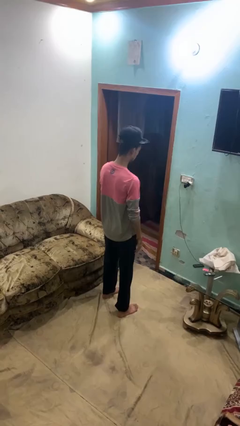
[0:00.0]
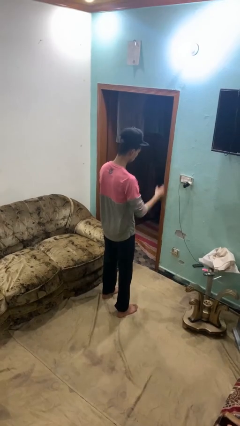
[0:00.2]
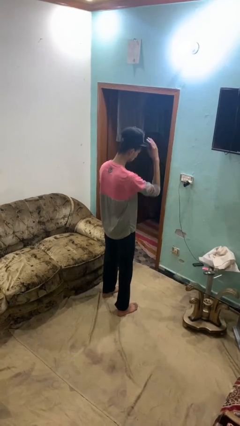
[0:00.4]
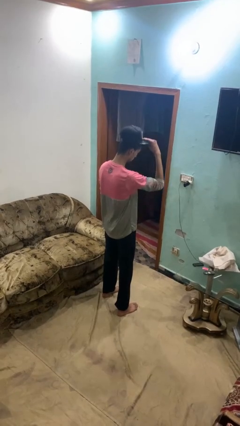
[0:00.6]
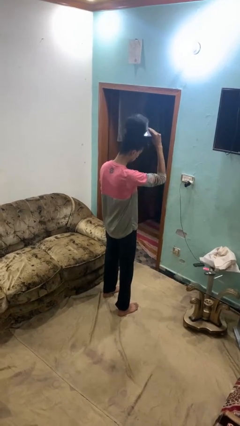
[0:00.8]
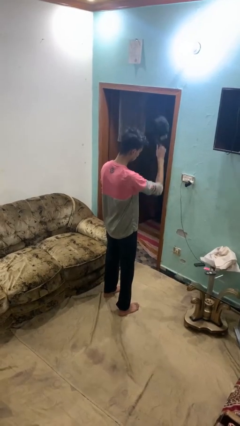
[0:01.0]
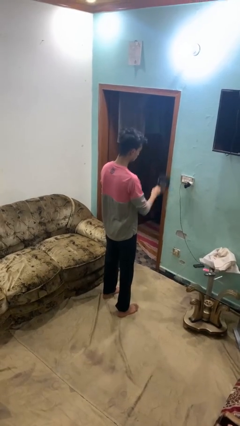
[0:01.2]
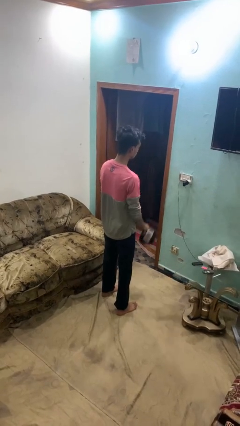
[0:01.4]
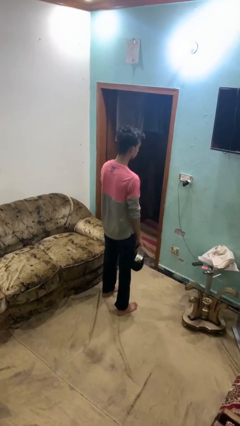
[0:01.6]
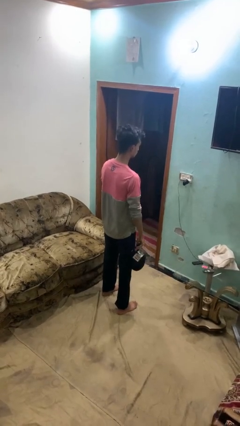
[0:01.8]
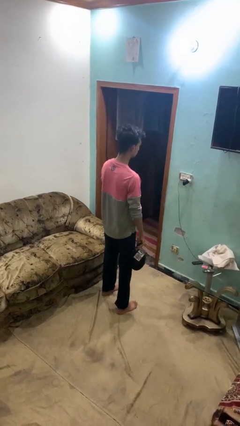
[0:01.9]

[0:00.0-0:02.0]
person takes off hat

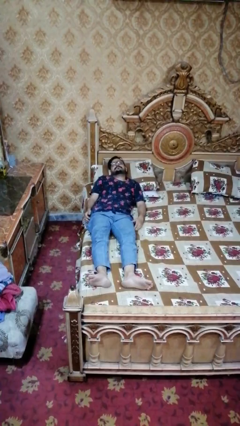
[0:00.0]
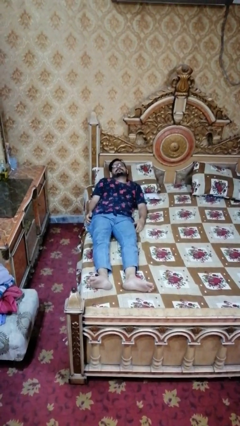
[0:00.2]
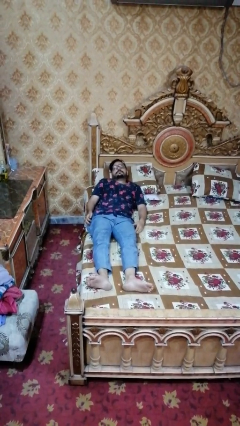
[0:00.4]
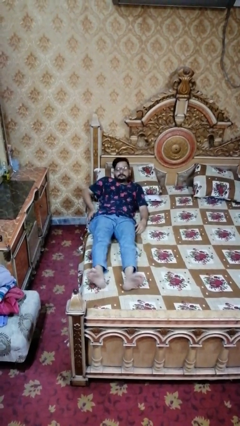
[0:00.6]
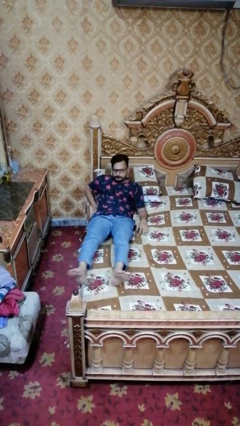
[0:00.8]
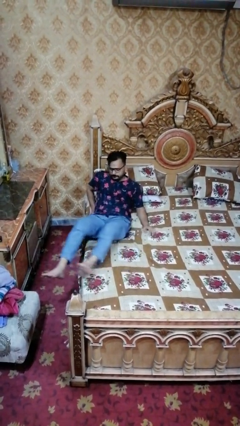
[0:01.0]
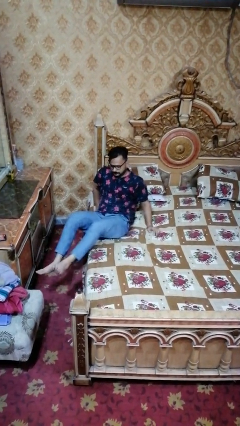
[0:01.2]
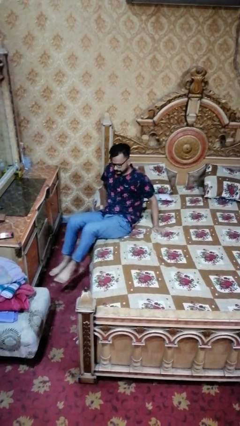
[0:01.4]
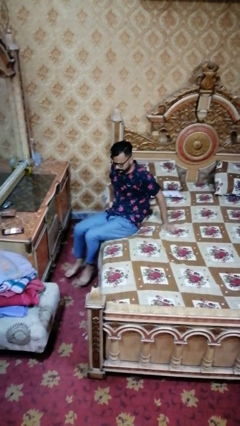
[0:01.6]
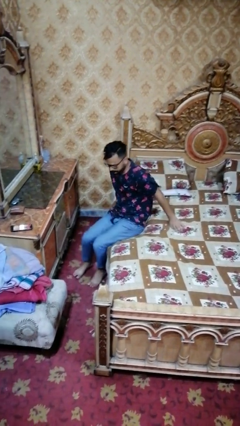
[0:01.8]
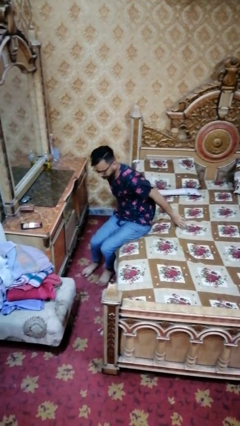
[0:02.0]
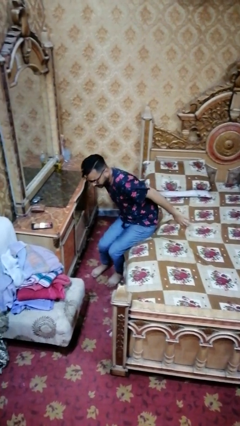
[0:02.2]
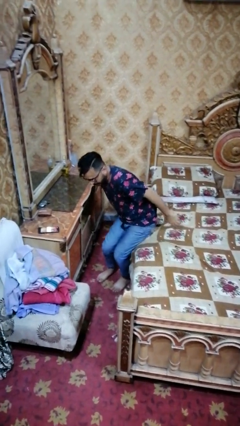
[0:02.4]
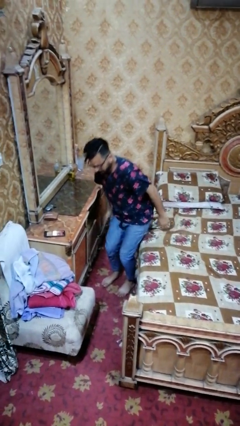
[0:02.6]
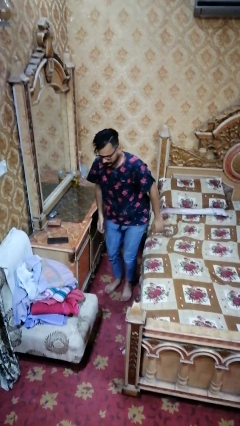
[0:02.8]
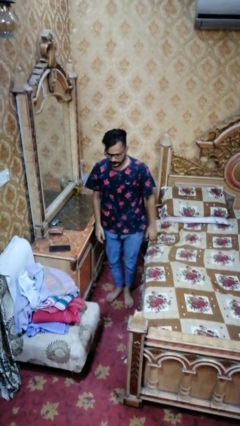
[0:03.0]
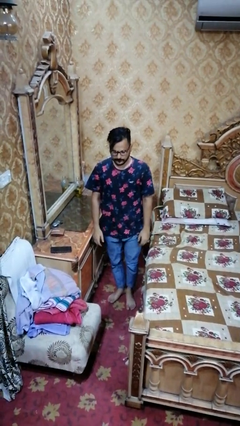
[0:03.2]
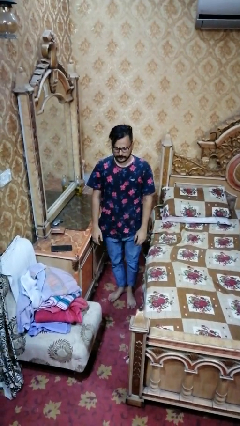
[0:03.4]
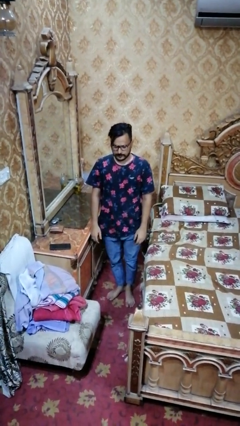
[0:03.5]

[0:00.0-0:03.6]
person stands up

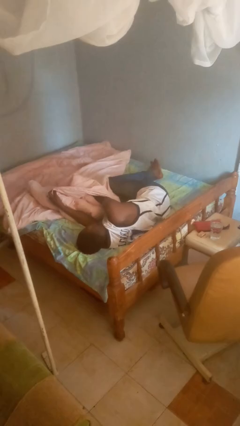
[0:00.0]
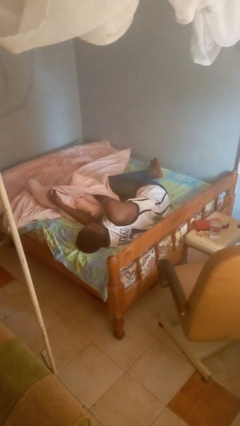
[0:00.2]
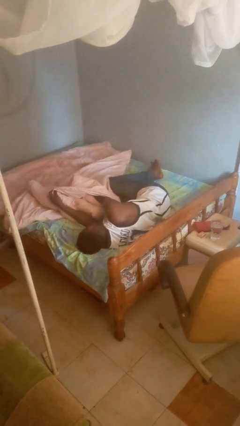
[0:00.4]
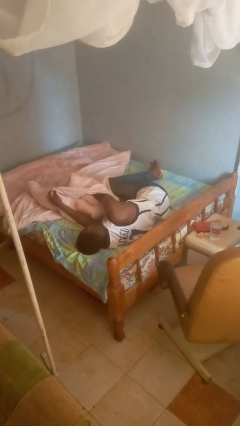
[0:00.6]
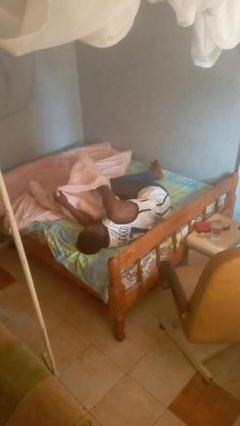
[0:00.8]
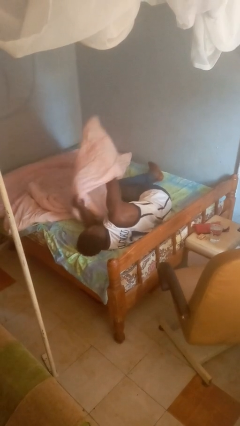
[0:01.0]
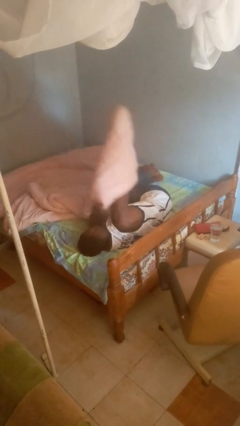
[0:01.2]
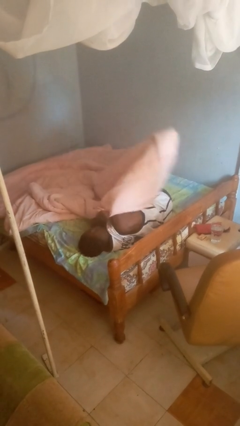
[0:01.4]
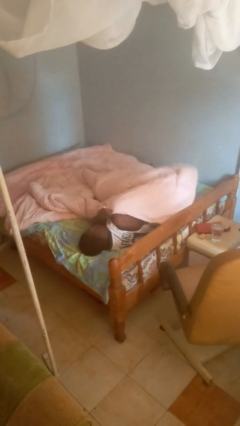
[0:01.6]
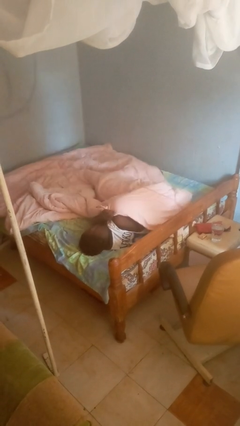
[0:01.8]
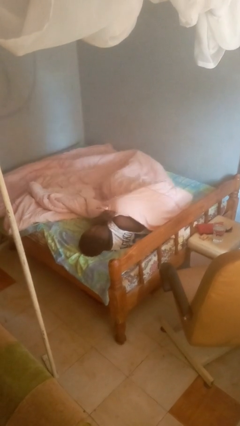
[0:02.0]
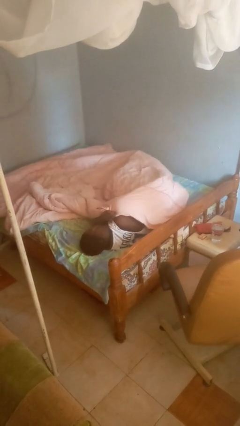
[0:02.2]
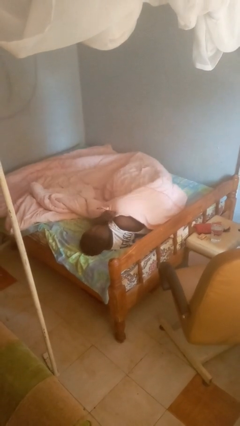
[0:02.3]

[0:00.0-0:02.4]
person covers with blanket

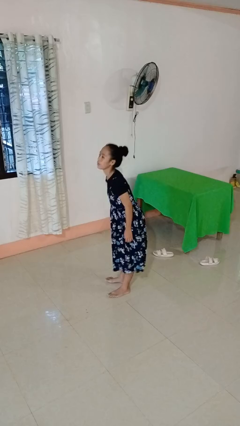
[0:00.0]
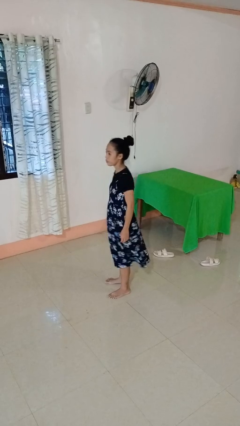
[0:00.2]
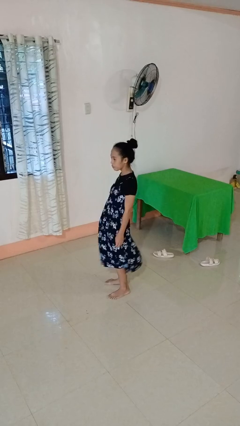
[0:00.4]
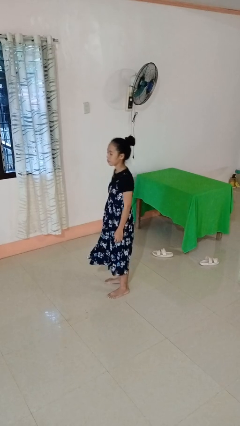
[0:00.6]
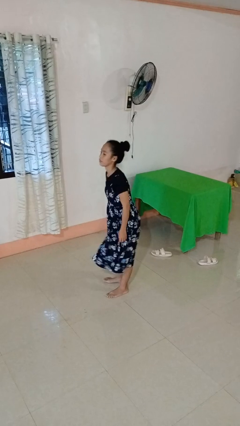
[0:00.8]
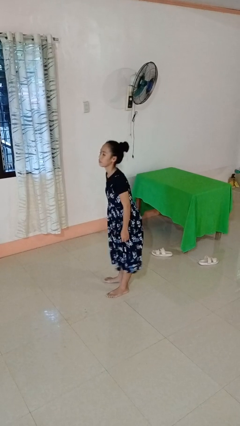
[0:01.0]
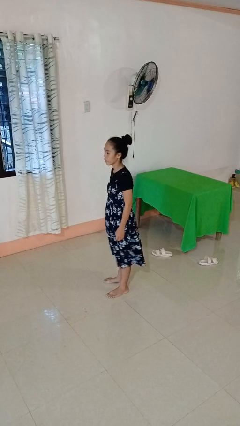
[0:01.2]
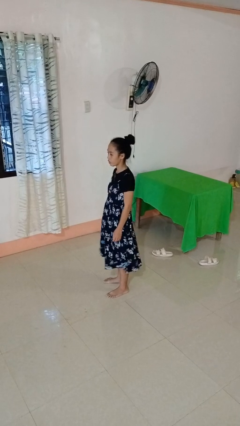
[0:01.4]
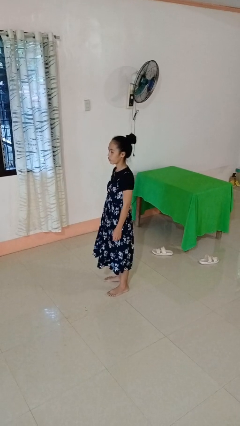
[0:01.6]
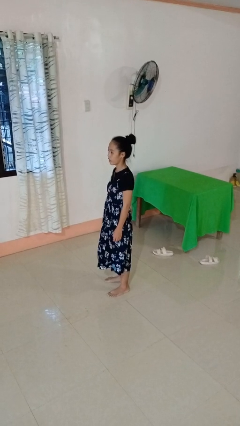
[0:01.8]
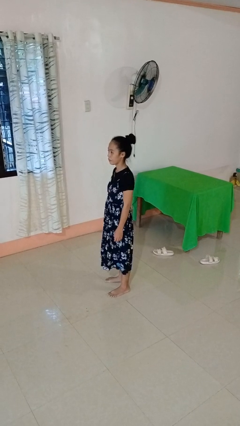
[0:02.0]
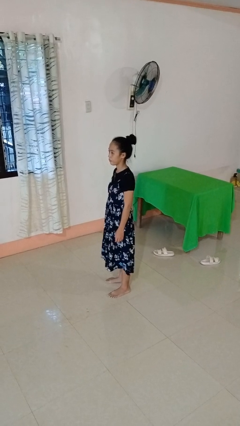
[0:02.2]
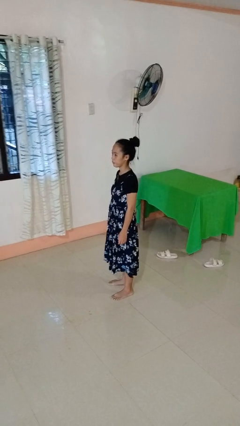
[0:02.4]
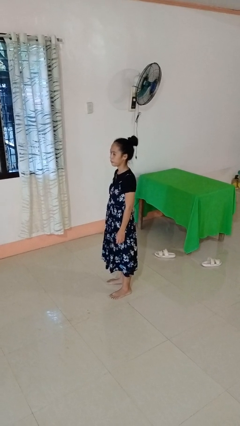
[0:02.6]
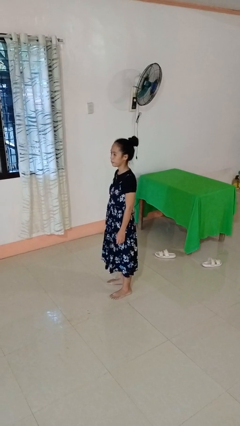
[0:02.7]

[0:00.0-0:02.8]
person wiggles hips

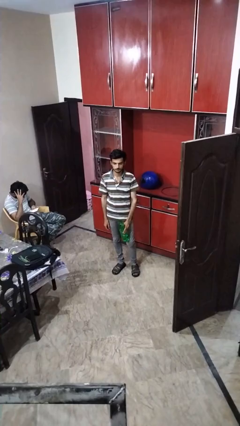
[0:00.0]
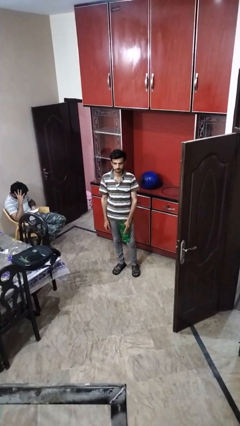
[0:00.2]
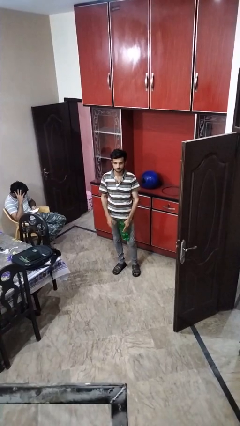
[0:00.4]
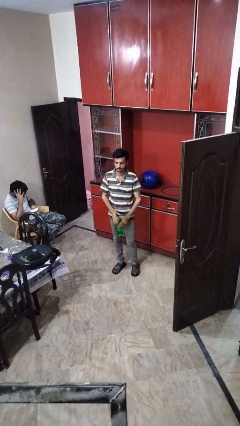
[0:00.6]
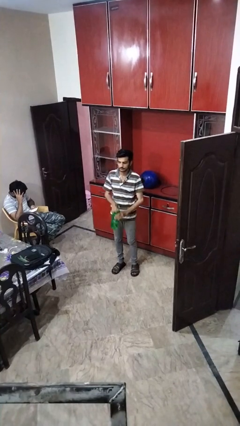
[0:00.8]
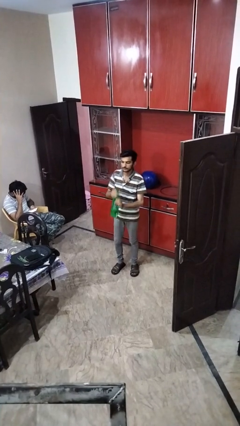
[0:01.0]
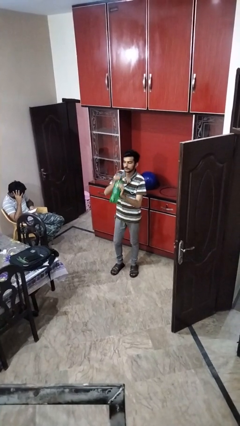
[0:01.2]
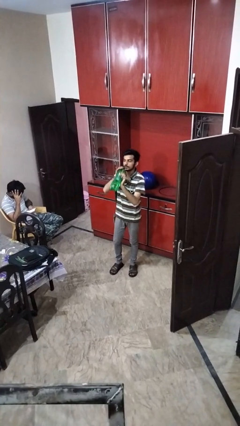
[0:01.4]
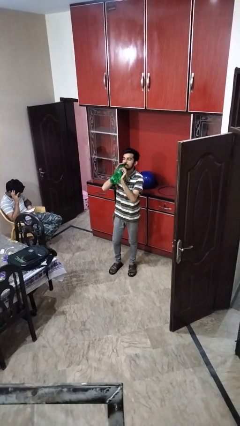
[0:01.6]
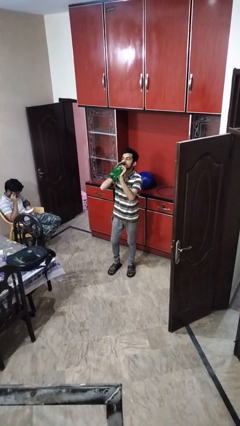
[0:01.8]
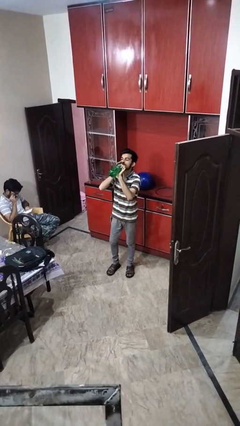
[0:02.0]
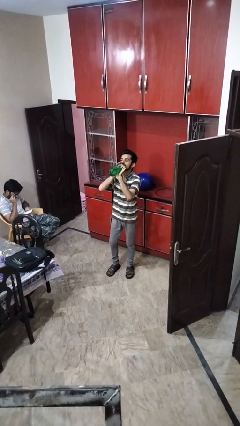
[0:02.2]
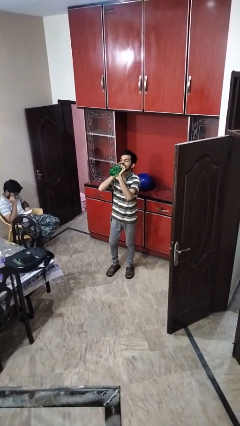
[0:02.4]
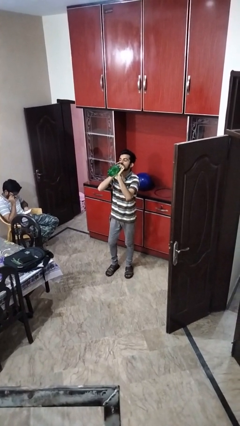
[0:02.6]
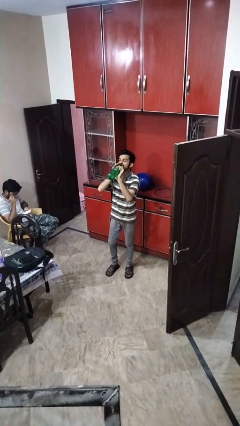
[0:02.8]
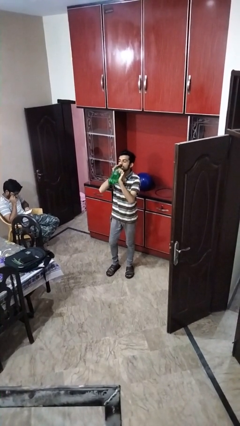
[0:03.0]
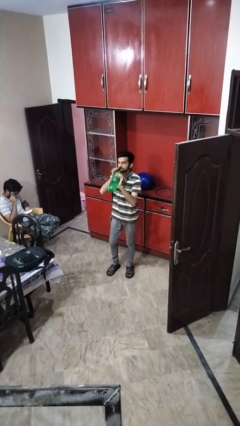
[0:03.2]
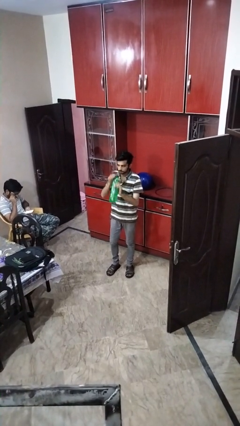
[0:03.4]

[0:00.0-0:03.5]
person drinks from bottle

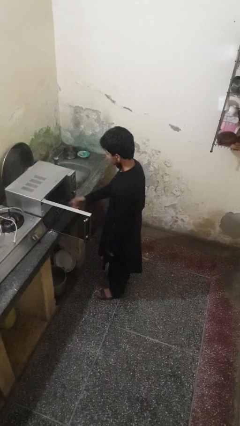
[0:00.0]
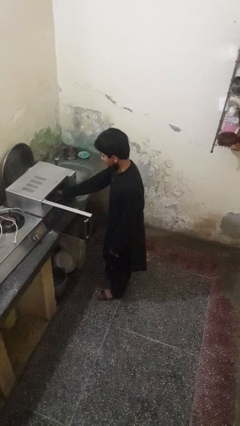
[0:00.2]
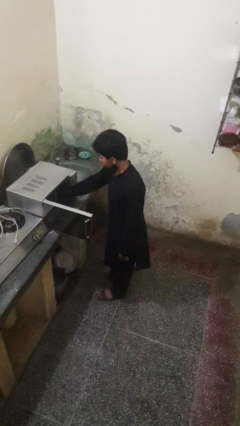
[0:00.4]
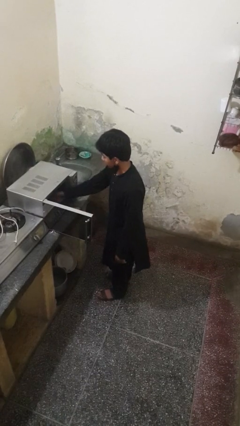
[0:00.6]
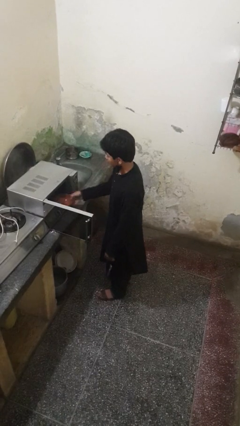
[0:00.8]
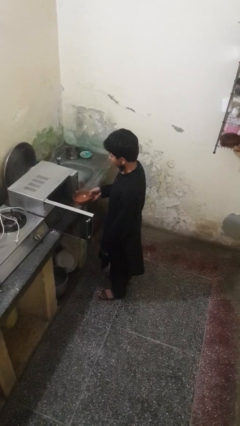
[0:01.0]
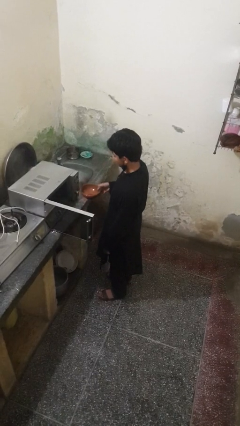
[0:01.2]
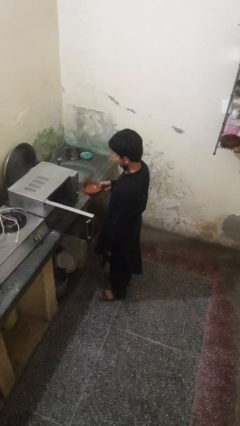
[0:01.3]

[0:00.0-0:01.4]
person takes object from microwave

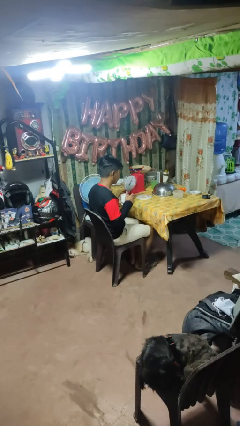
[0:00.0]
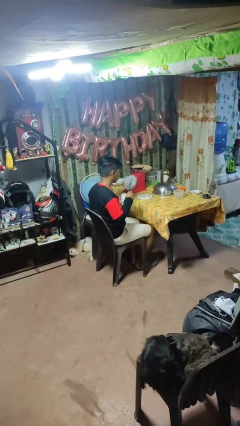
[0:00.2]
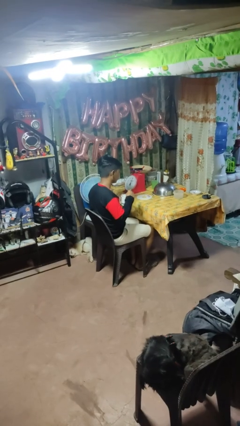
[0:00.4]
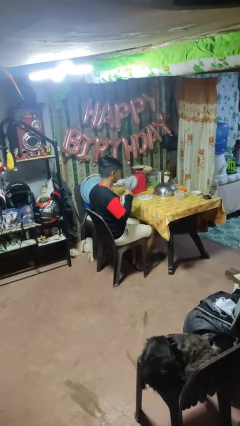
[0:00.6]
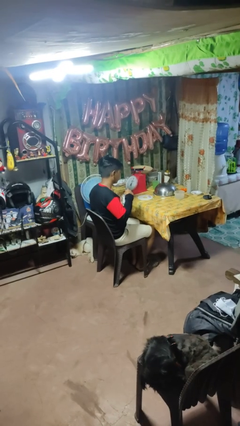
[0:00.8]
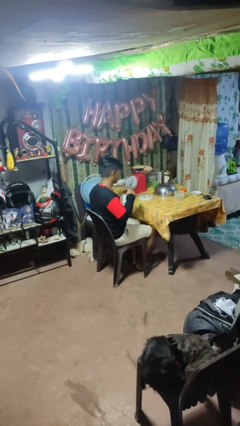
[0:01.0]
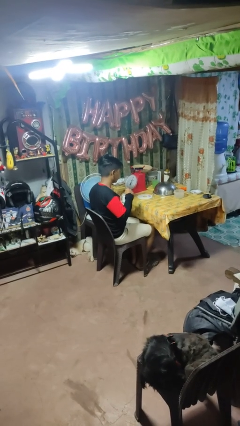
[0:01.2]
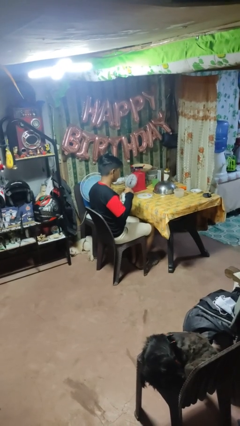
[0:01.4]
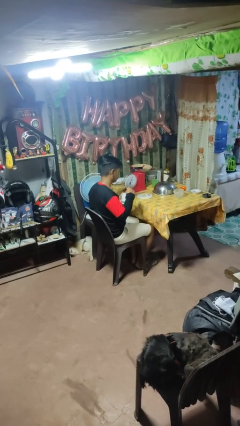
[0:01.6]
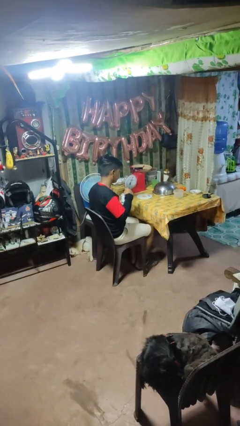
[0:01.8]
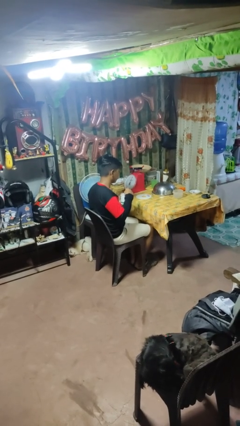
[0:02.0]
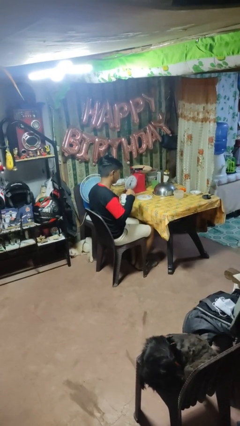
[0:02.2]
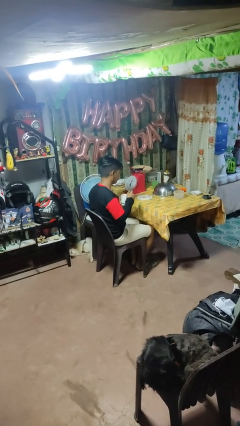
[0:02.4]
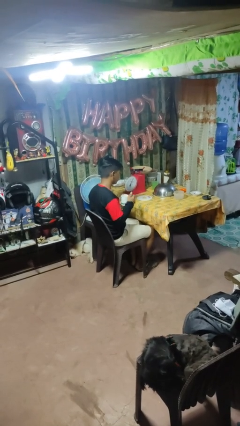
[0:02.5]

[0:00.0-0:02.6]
person stirs mug
